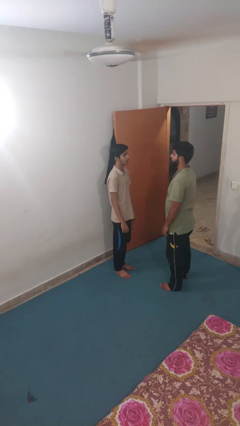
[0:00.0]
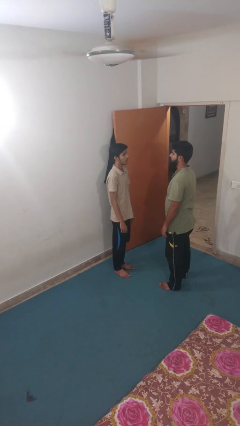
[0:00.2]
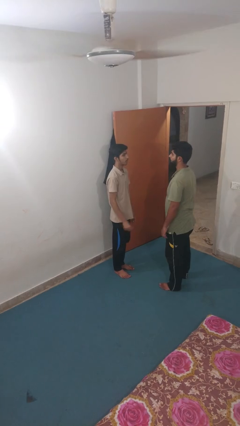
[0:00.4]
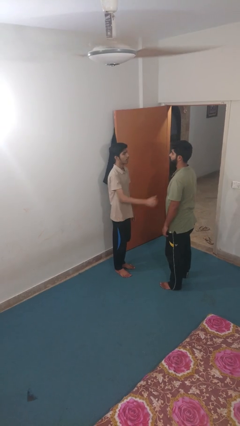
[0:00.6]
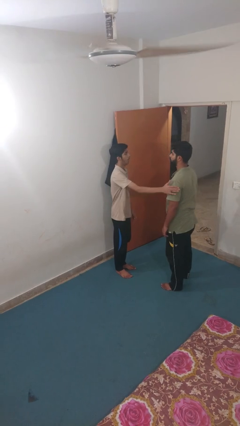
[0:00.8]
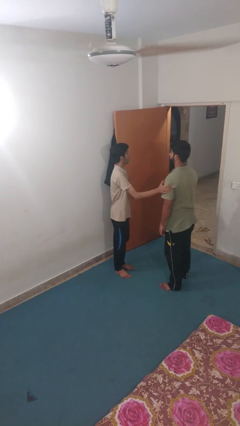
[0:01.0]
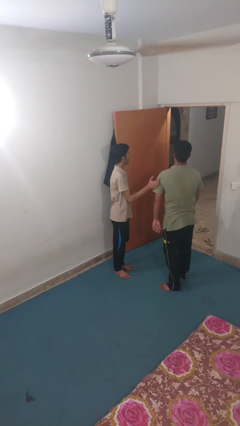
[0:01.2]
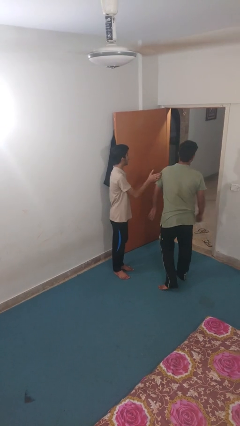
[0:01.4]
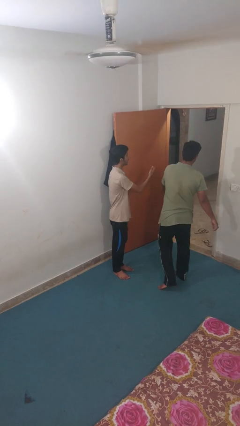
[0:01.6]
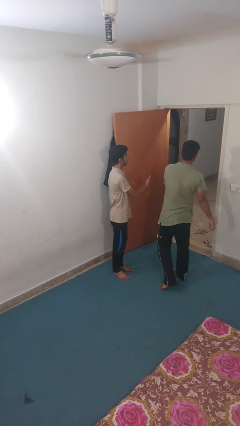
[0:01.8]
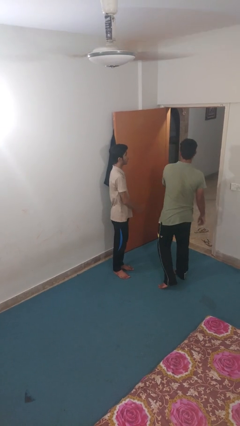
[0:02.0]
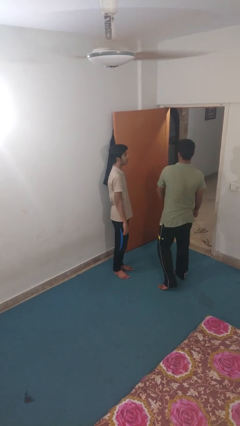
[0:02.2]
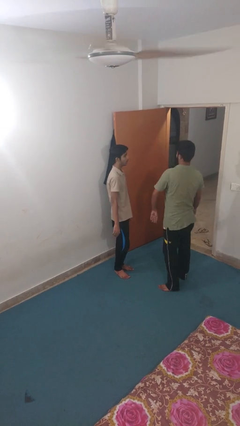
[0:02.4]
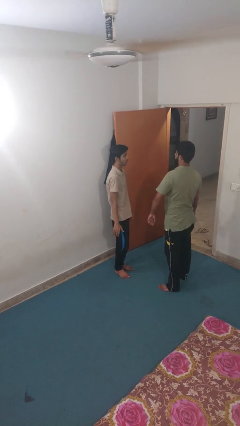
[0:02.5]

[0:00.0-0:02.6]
person shoves person

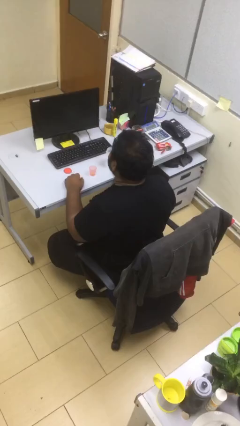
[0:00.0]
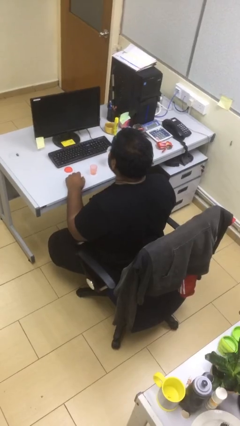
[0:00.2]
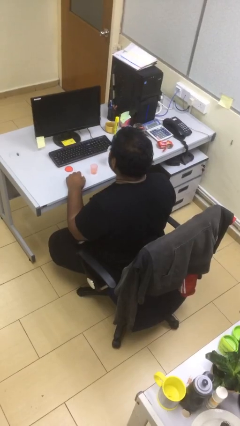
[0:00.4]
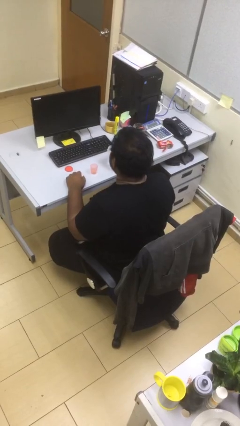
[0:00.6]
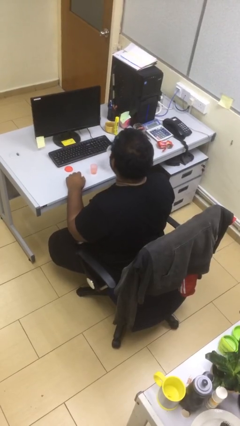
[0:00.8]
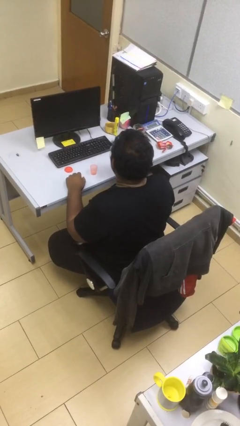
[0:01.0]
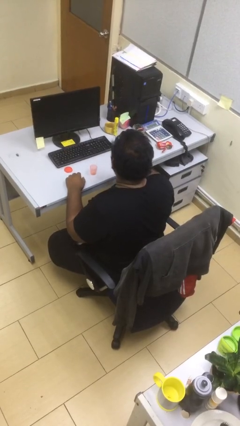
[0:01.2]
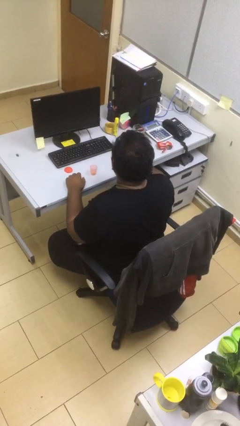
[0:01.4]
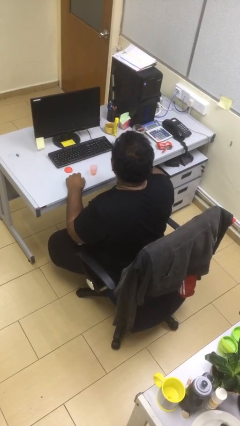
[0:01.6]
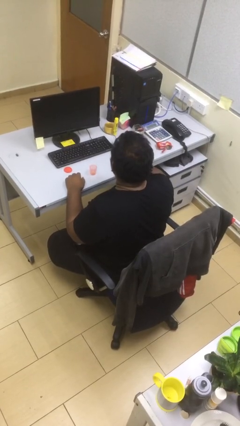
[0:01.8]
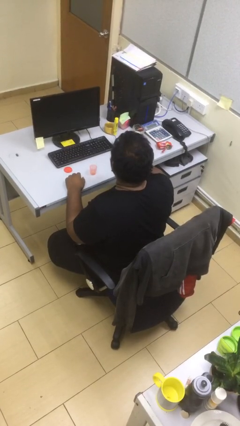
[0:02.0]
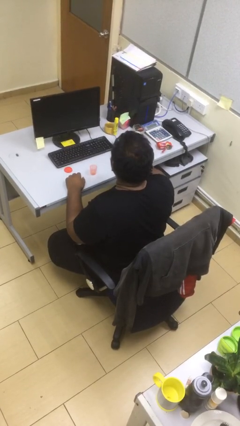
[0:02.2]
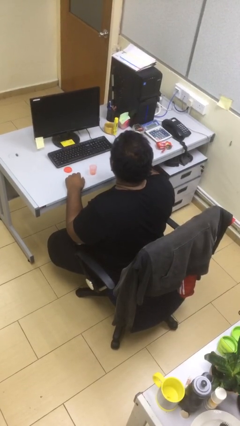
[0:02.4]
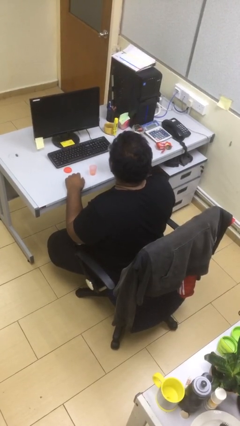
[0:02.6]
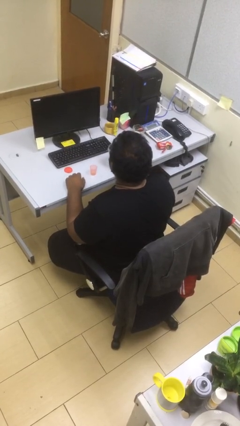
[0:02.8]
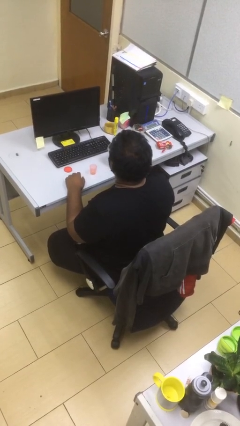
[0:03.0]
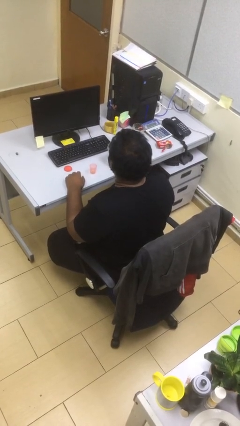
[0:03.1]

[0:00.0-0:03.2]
person drinks from cup

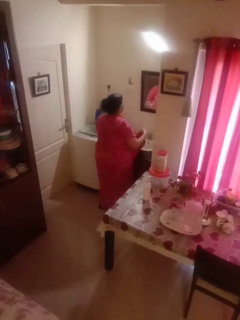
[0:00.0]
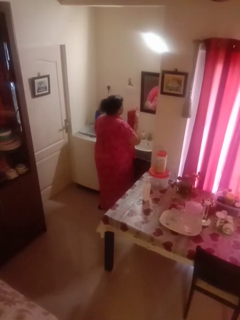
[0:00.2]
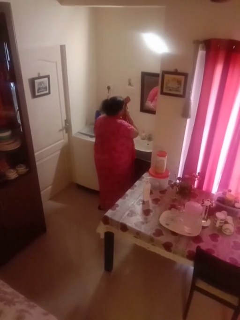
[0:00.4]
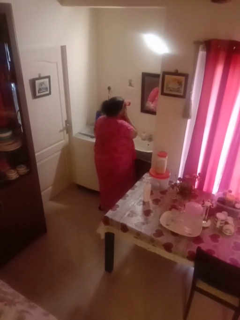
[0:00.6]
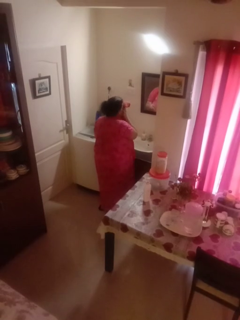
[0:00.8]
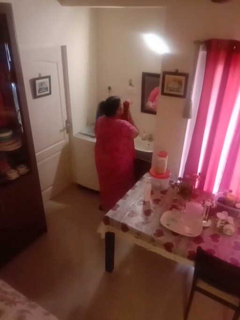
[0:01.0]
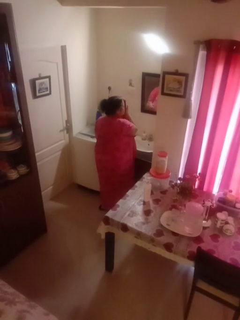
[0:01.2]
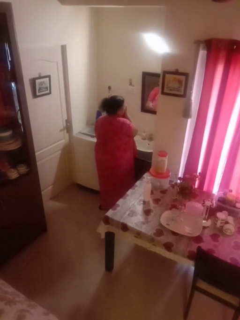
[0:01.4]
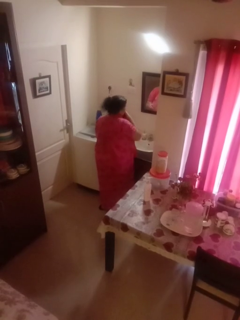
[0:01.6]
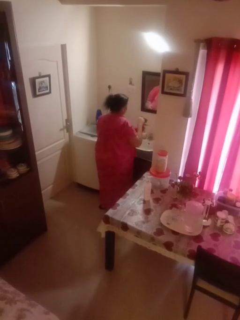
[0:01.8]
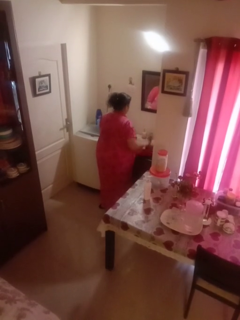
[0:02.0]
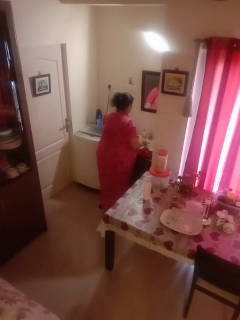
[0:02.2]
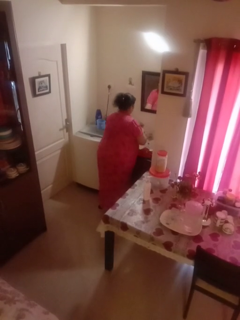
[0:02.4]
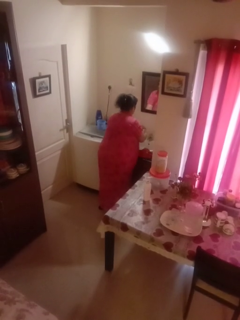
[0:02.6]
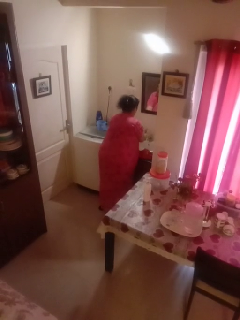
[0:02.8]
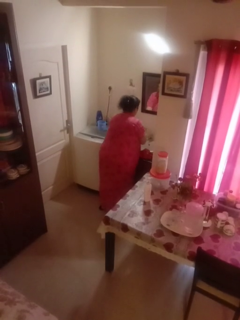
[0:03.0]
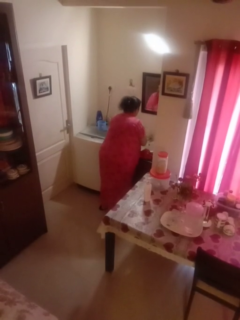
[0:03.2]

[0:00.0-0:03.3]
person dries face with towel

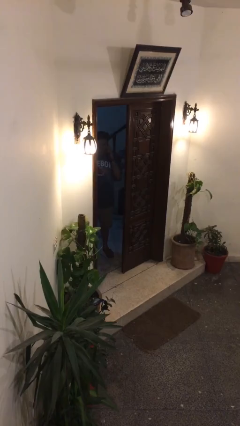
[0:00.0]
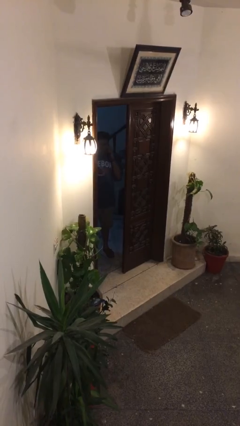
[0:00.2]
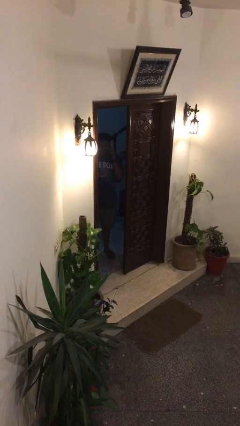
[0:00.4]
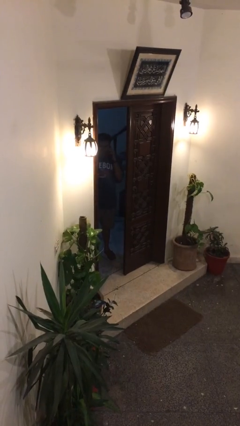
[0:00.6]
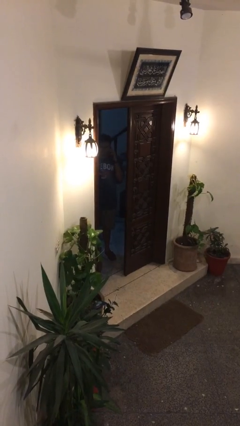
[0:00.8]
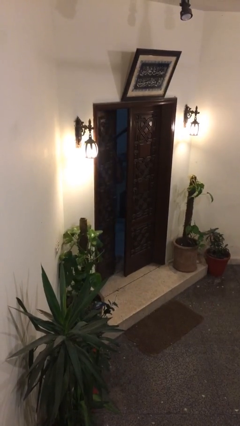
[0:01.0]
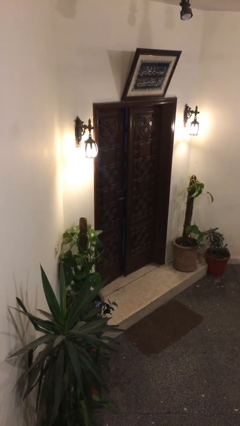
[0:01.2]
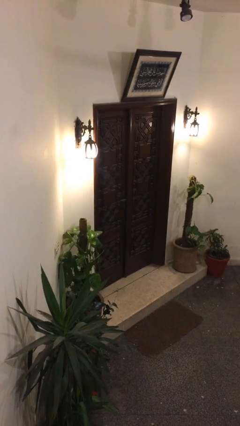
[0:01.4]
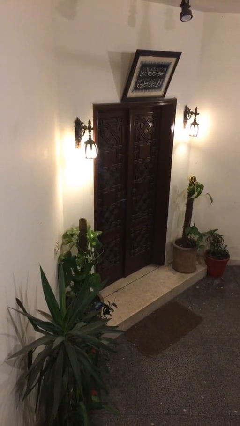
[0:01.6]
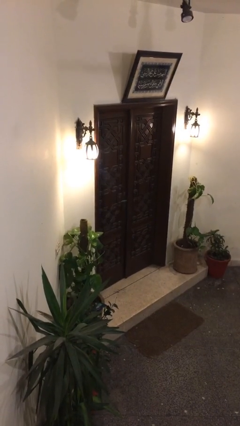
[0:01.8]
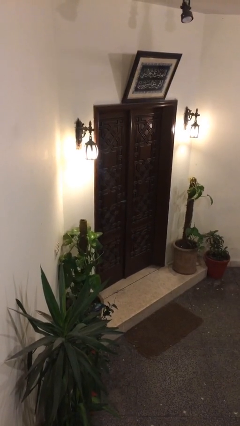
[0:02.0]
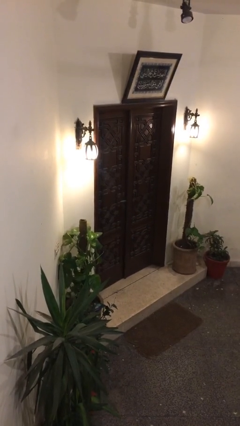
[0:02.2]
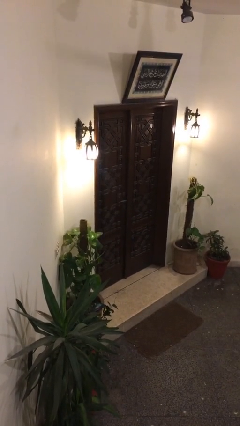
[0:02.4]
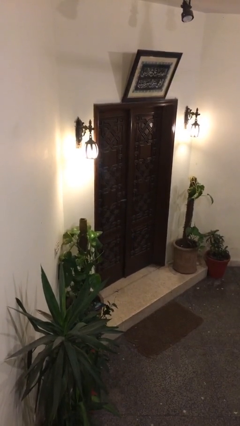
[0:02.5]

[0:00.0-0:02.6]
person closes facility door

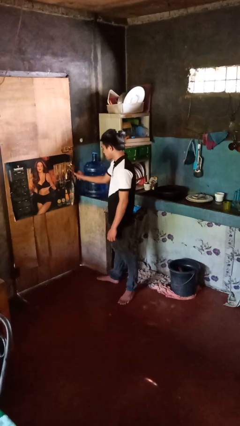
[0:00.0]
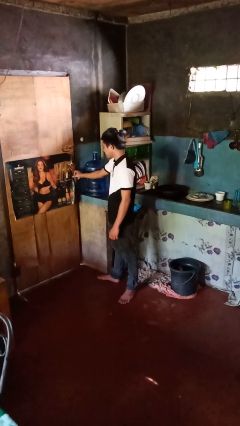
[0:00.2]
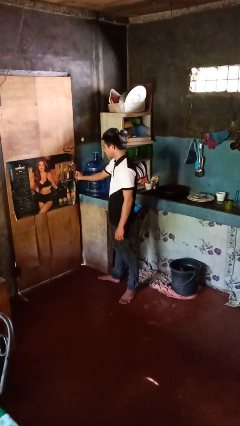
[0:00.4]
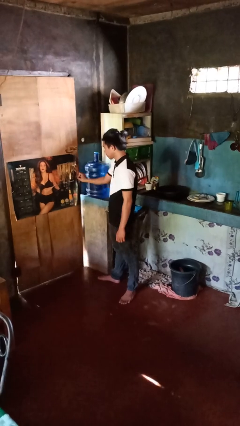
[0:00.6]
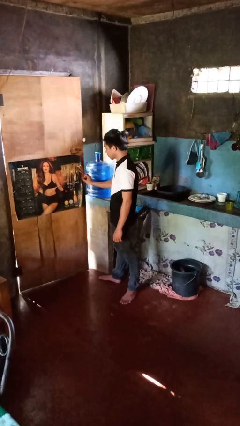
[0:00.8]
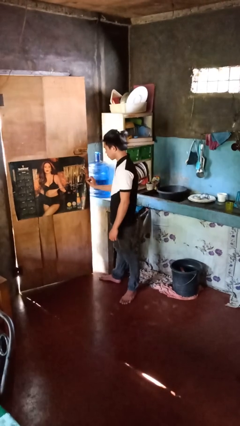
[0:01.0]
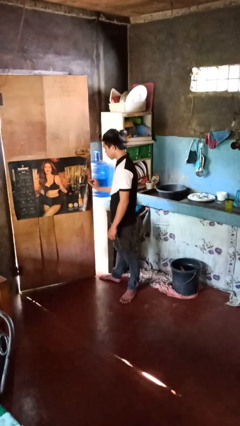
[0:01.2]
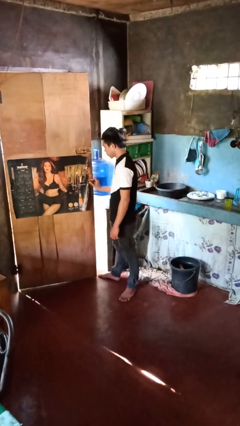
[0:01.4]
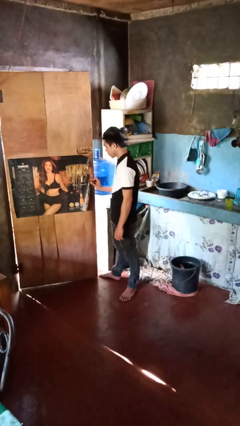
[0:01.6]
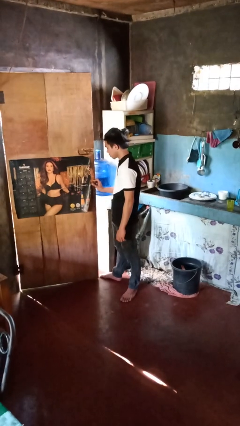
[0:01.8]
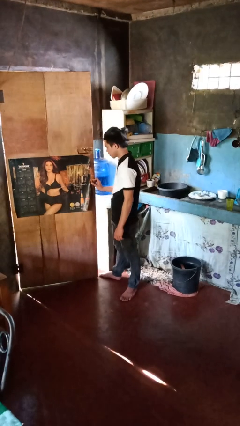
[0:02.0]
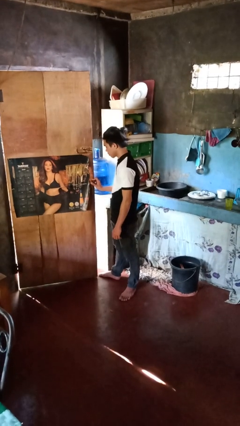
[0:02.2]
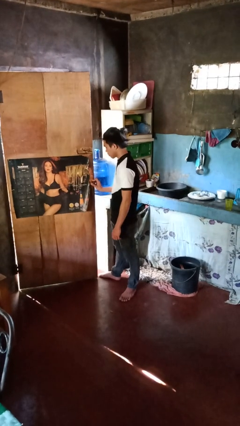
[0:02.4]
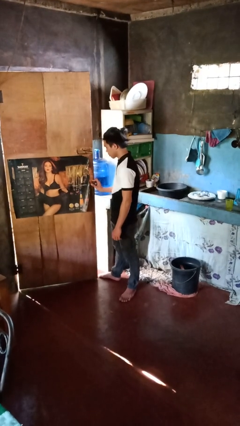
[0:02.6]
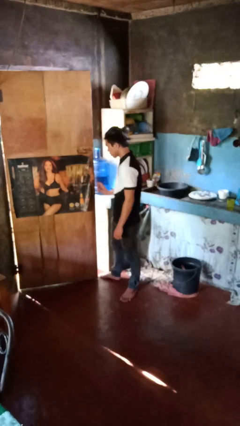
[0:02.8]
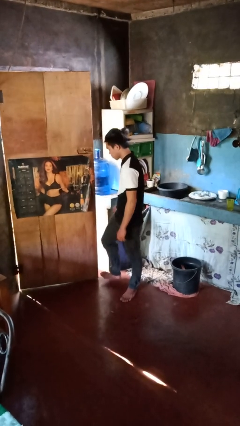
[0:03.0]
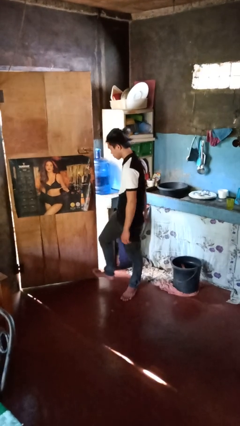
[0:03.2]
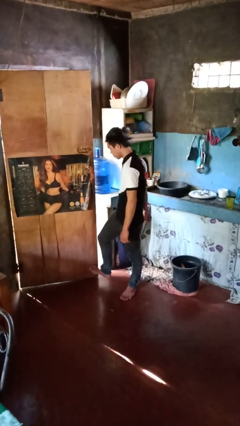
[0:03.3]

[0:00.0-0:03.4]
person opens facility door

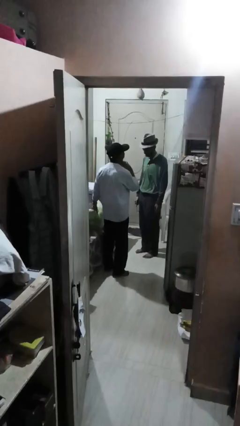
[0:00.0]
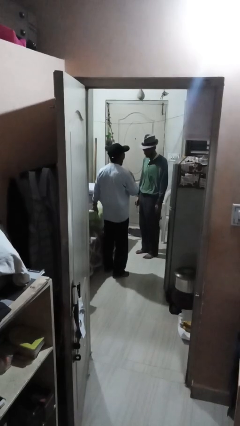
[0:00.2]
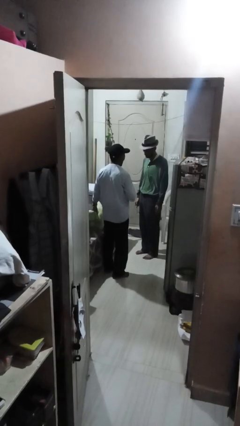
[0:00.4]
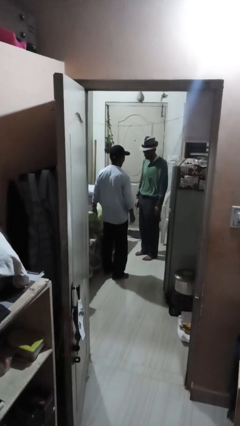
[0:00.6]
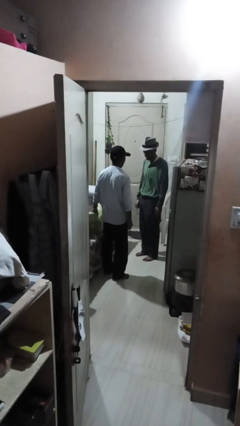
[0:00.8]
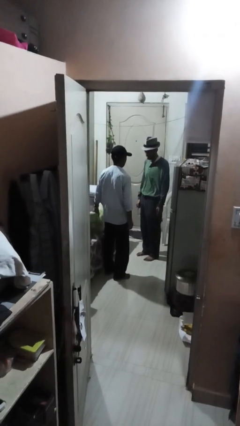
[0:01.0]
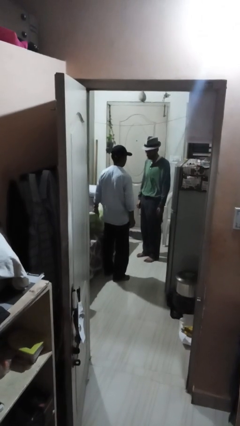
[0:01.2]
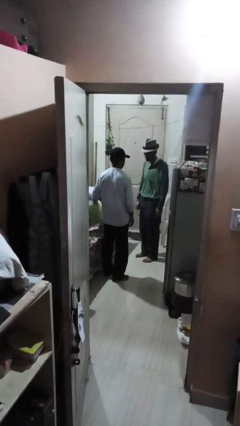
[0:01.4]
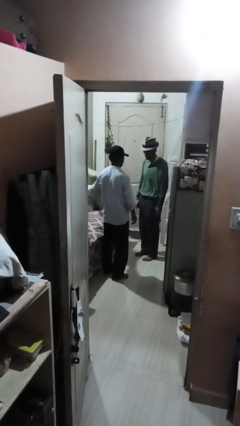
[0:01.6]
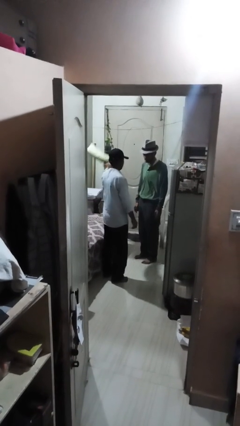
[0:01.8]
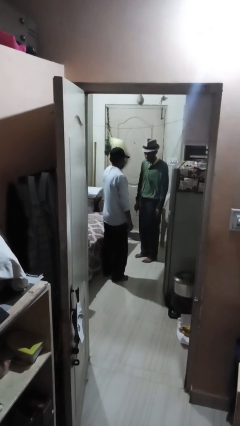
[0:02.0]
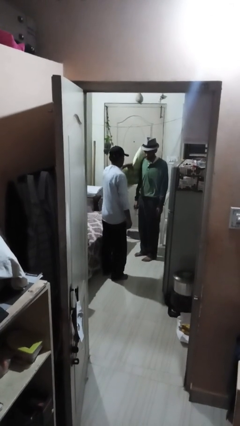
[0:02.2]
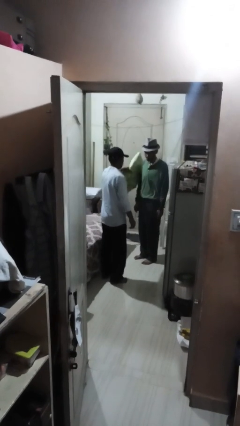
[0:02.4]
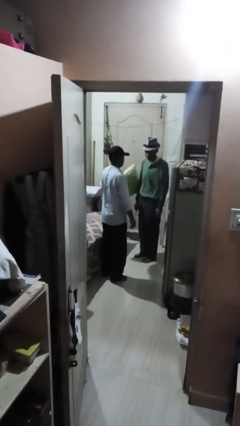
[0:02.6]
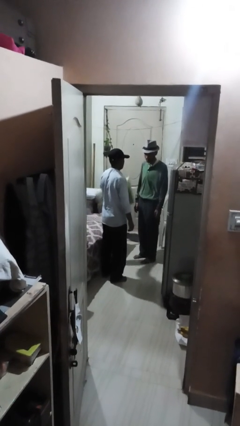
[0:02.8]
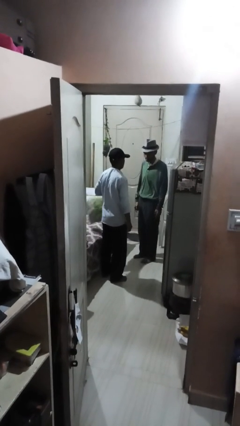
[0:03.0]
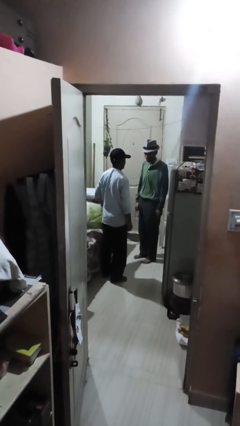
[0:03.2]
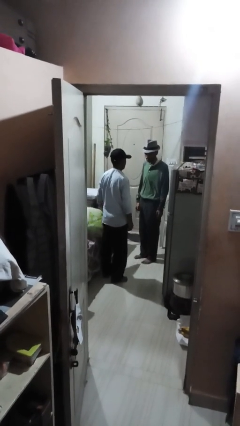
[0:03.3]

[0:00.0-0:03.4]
person hits person with pillow
